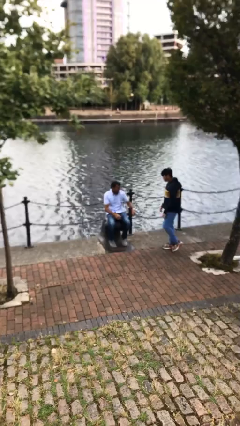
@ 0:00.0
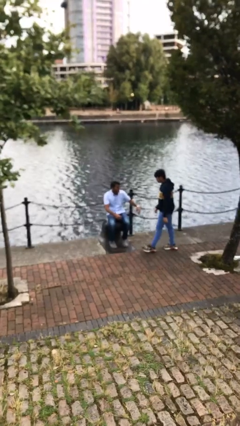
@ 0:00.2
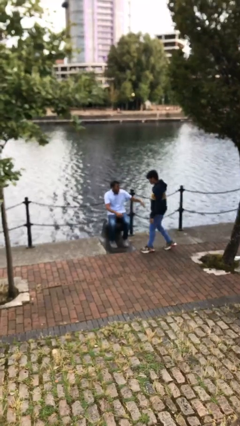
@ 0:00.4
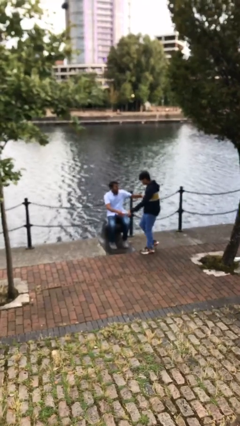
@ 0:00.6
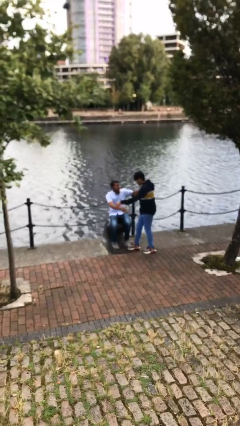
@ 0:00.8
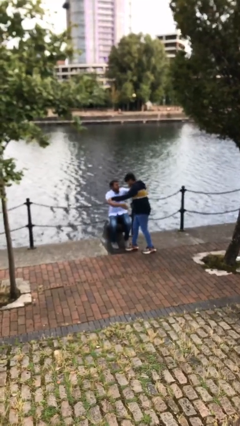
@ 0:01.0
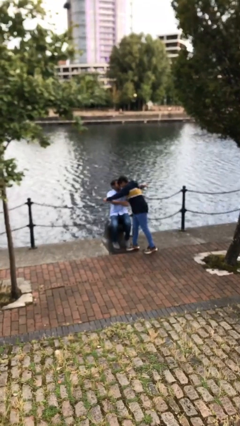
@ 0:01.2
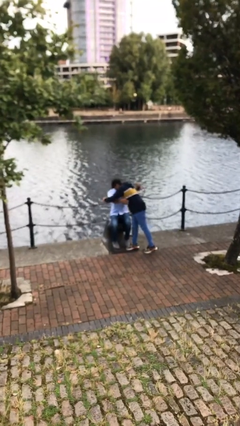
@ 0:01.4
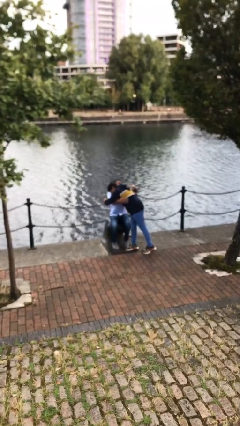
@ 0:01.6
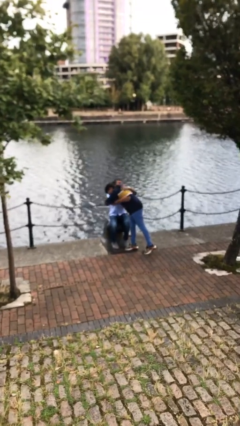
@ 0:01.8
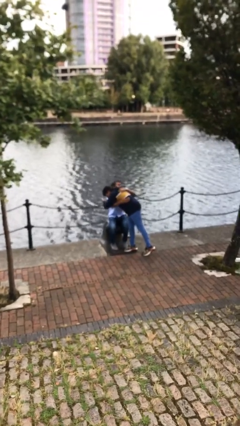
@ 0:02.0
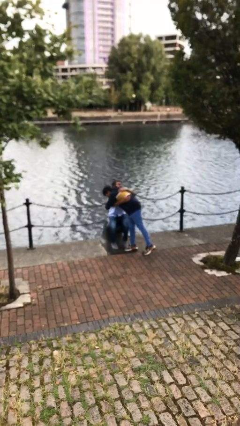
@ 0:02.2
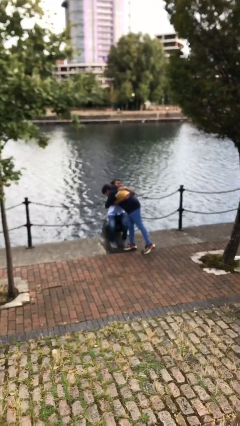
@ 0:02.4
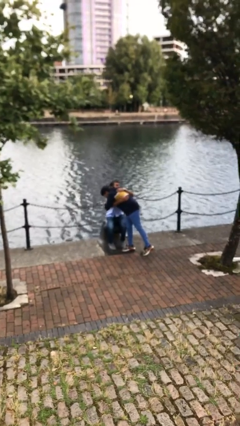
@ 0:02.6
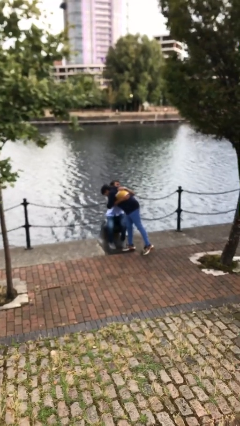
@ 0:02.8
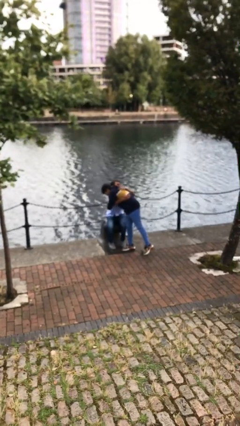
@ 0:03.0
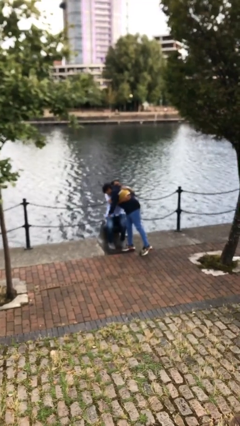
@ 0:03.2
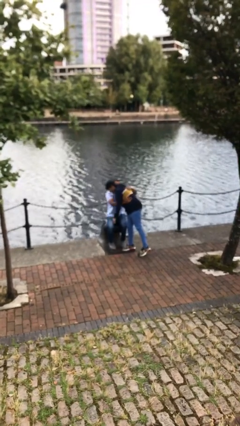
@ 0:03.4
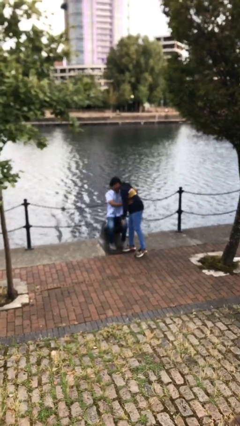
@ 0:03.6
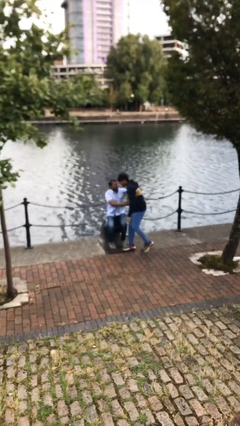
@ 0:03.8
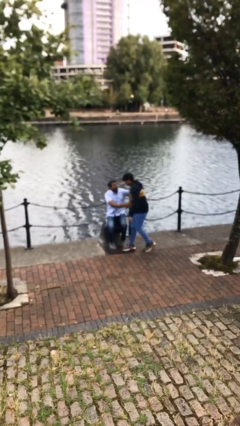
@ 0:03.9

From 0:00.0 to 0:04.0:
person embraces person

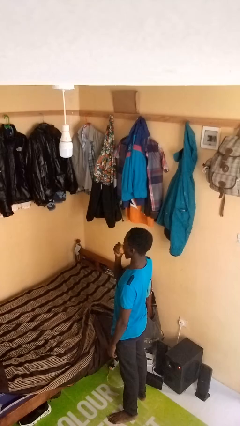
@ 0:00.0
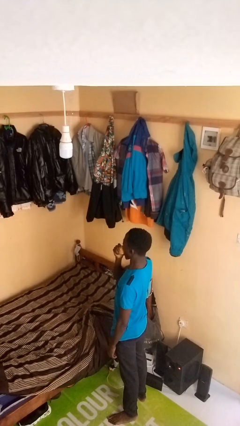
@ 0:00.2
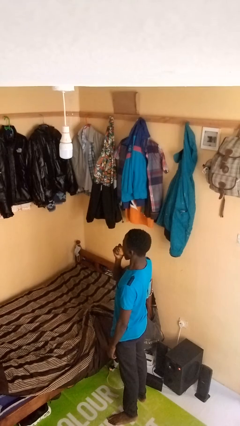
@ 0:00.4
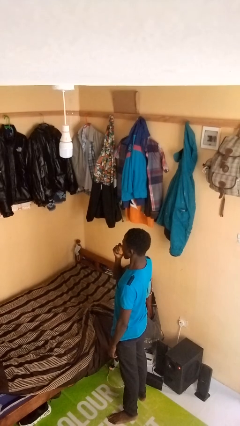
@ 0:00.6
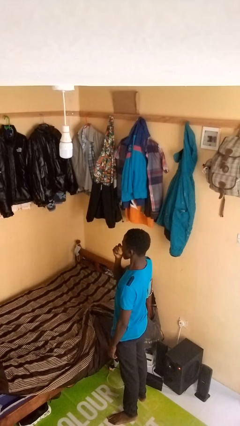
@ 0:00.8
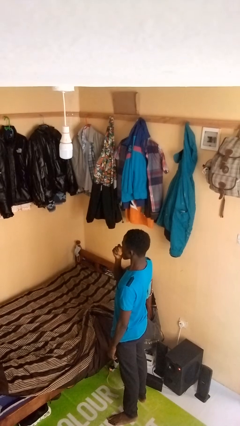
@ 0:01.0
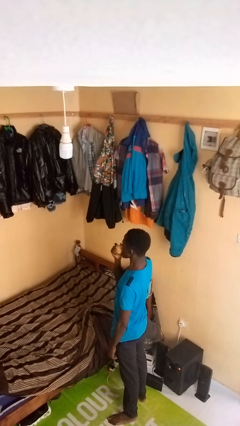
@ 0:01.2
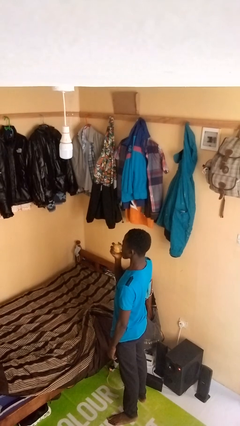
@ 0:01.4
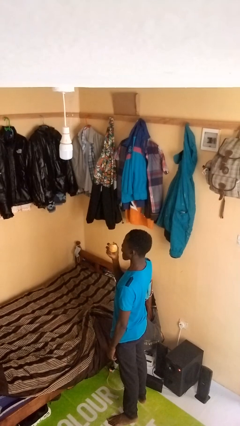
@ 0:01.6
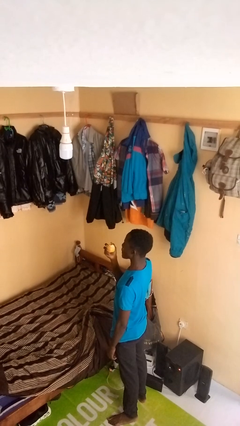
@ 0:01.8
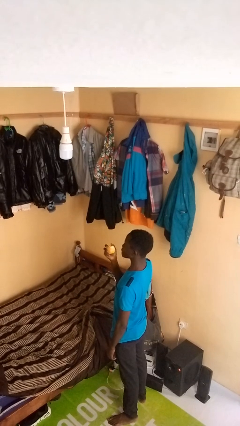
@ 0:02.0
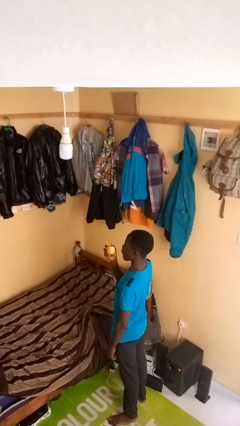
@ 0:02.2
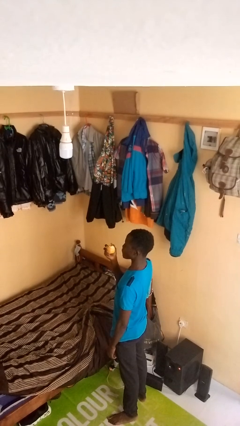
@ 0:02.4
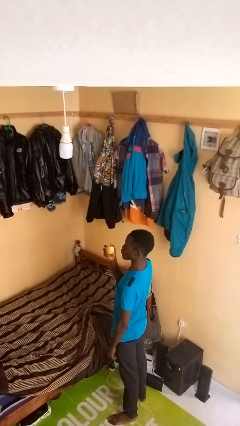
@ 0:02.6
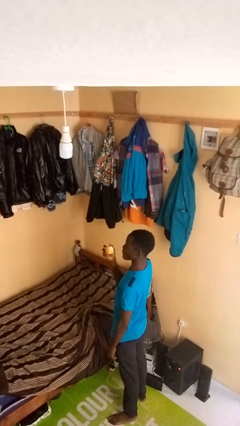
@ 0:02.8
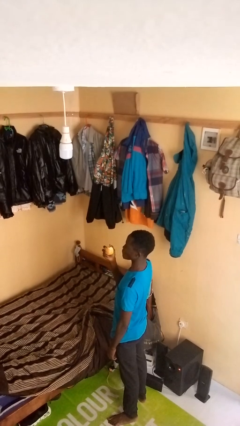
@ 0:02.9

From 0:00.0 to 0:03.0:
person eats apple

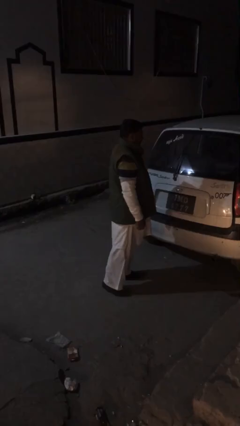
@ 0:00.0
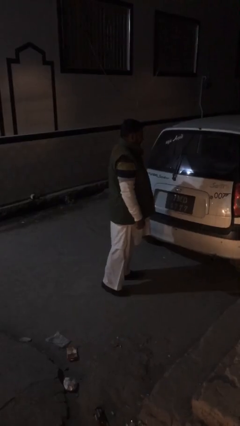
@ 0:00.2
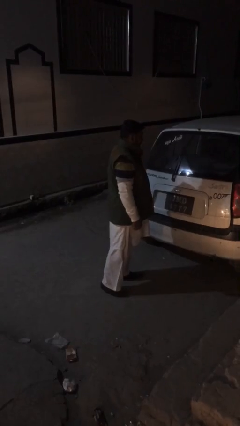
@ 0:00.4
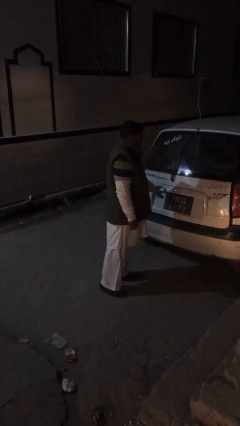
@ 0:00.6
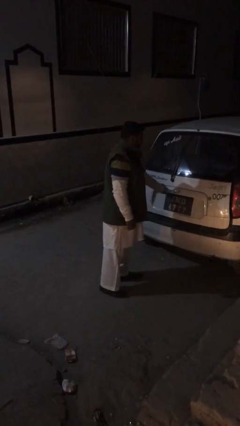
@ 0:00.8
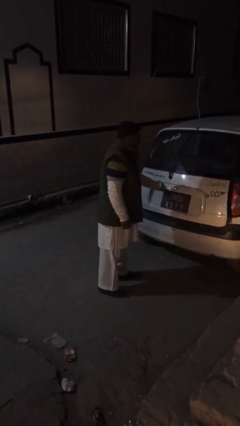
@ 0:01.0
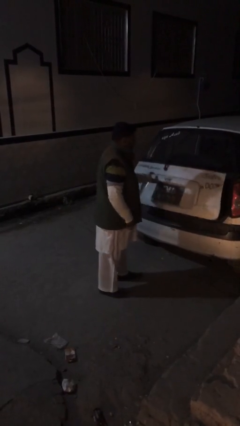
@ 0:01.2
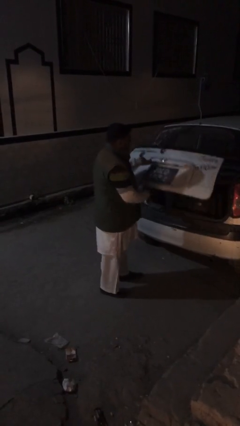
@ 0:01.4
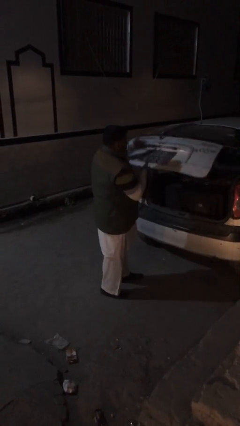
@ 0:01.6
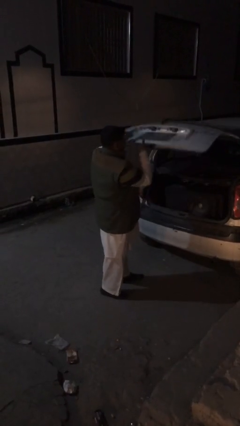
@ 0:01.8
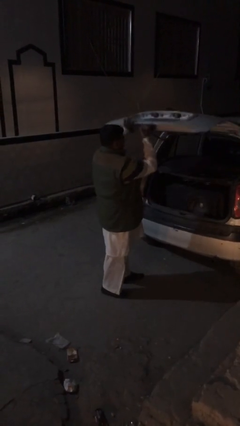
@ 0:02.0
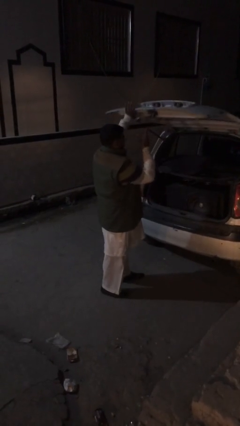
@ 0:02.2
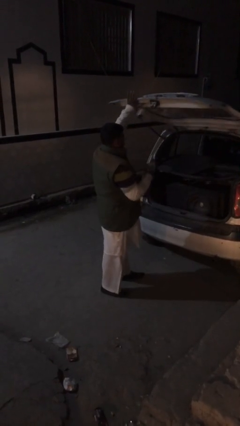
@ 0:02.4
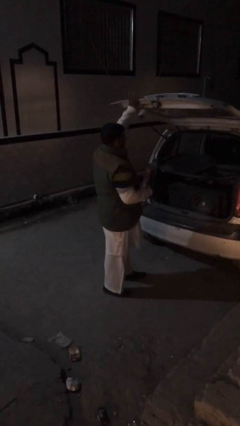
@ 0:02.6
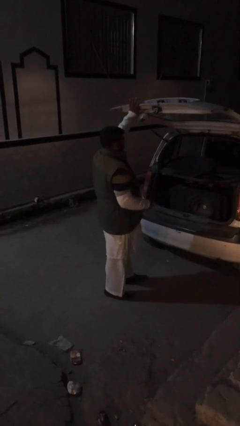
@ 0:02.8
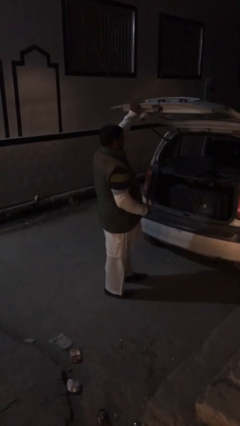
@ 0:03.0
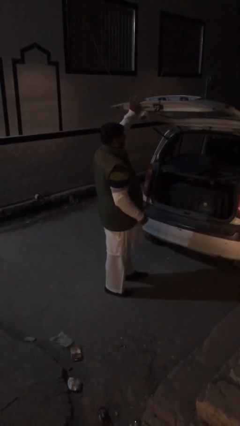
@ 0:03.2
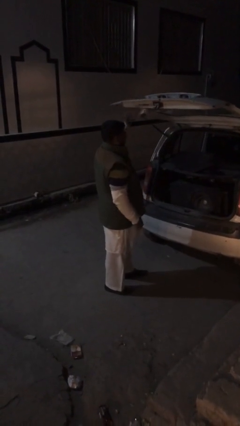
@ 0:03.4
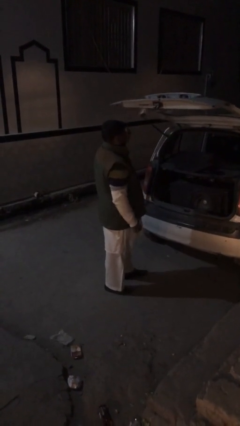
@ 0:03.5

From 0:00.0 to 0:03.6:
person opens car trunk

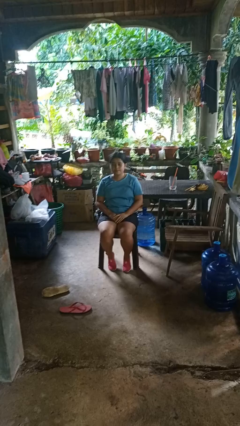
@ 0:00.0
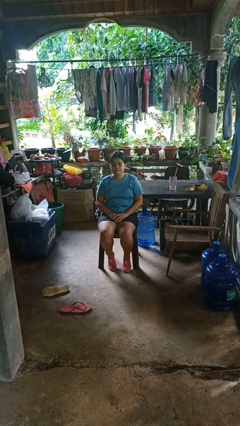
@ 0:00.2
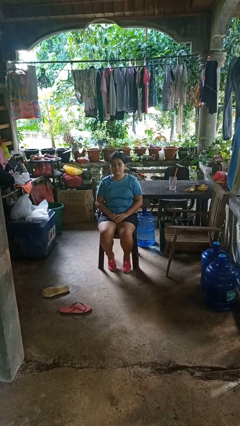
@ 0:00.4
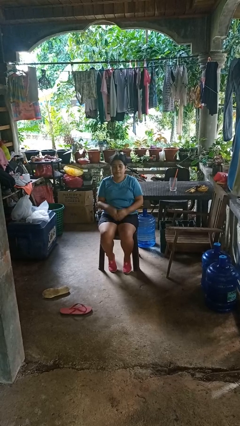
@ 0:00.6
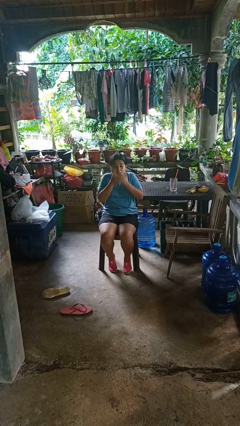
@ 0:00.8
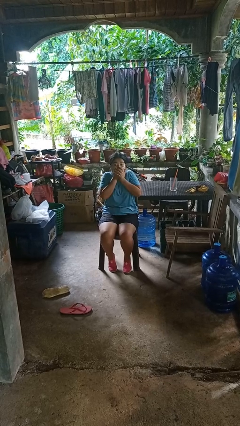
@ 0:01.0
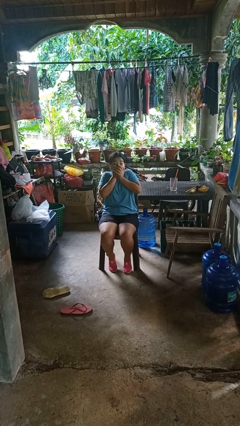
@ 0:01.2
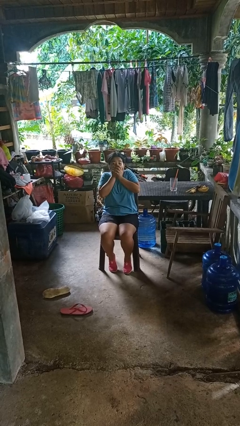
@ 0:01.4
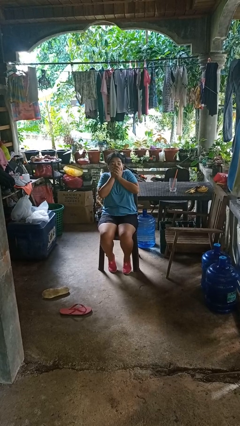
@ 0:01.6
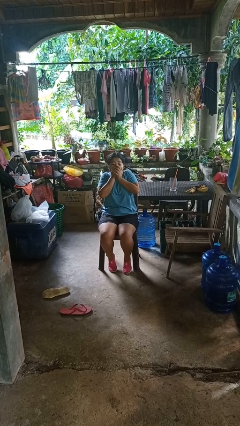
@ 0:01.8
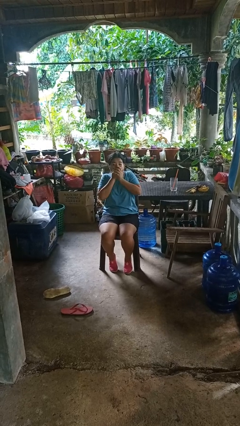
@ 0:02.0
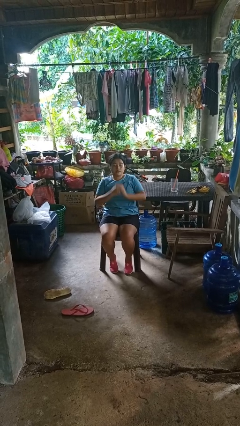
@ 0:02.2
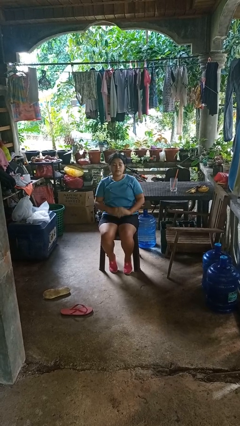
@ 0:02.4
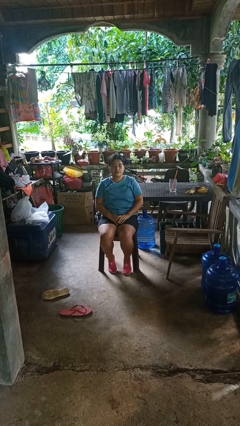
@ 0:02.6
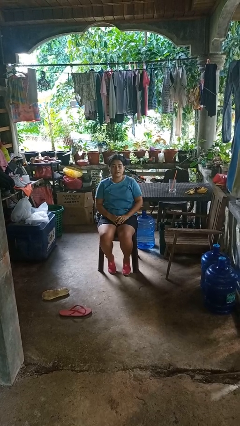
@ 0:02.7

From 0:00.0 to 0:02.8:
person covers face with hands

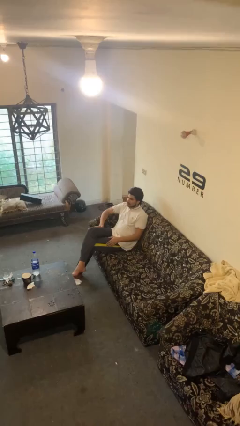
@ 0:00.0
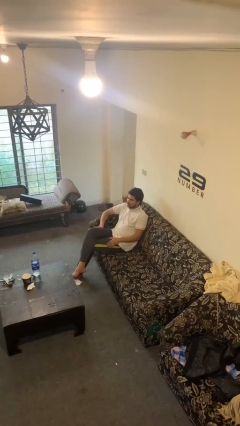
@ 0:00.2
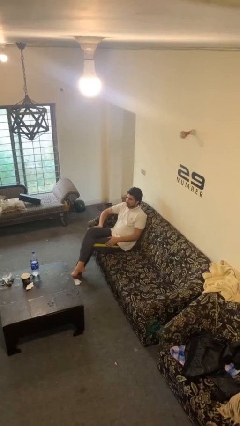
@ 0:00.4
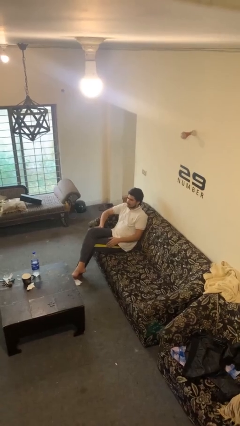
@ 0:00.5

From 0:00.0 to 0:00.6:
person claps hands

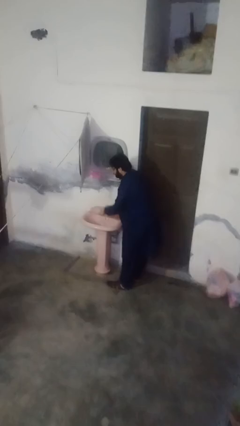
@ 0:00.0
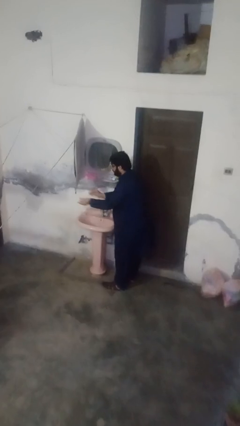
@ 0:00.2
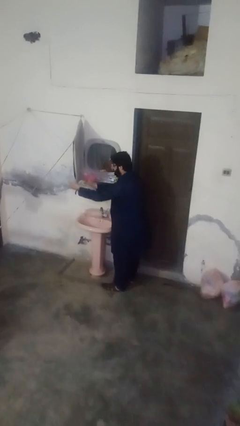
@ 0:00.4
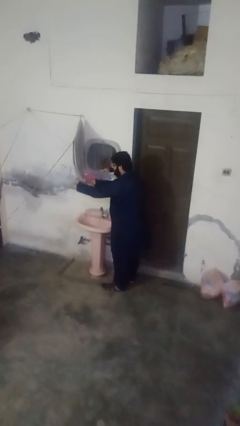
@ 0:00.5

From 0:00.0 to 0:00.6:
person washes hands

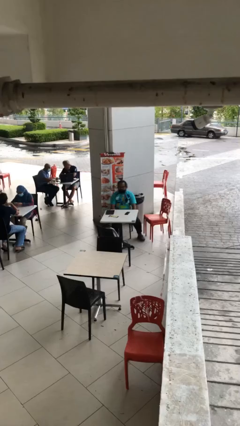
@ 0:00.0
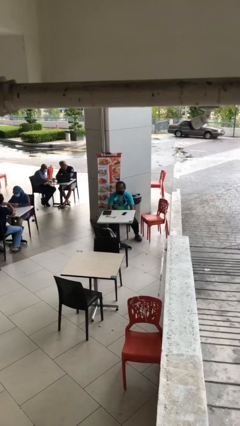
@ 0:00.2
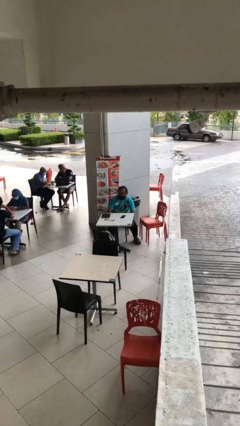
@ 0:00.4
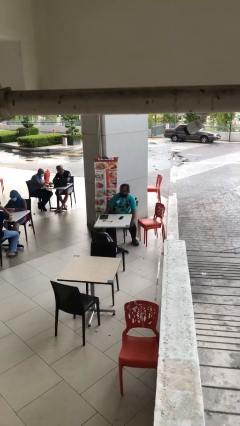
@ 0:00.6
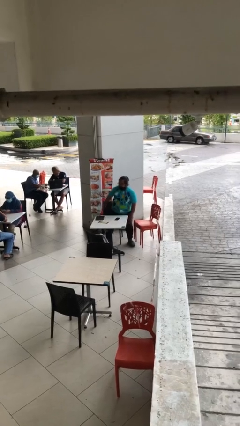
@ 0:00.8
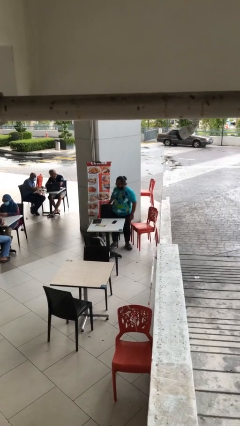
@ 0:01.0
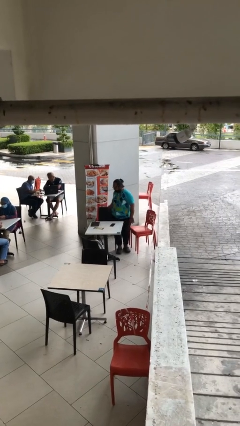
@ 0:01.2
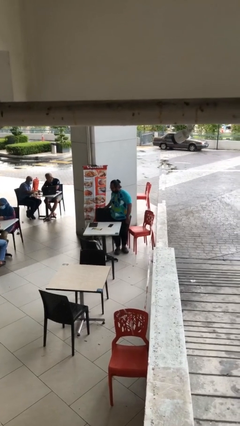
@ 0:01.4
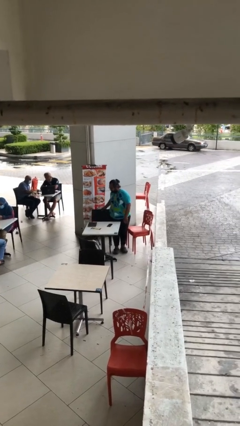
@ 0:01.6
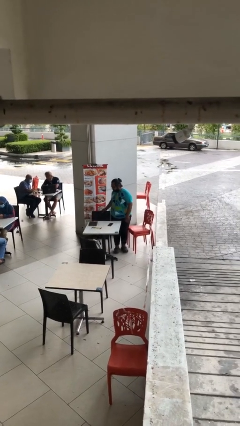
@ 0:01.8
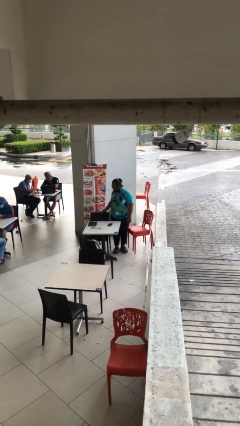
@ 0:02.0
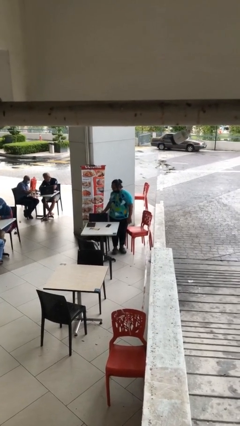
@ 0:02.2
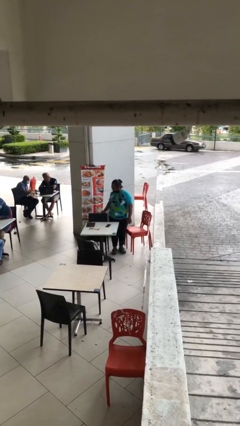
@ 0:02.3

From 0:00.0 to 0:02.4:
person stands up
